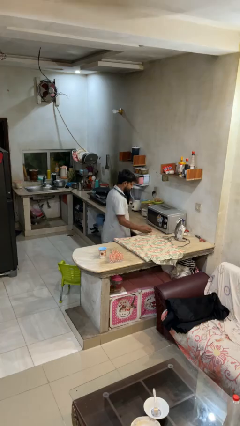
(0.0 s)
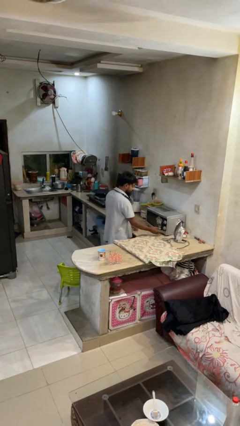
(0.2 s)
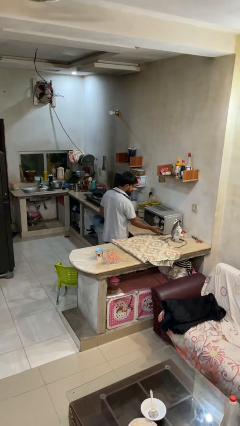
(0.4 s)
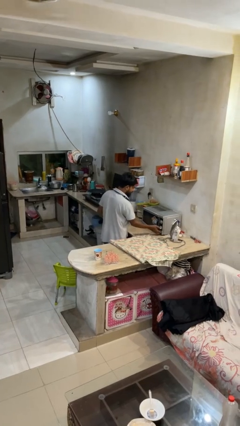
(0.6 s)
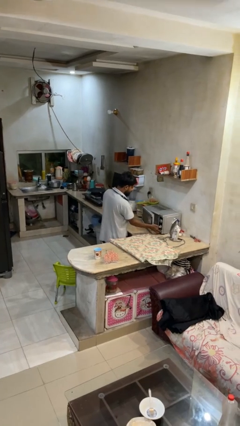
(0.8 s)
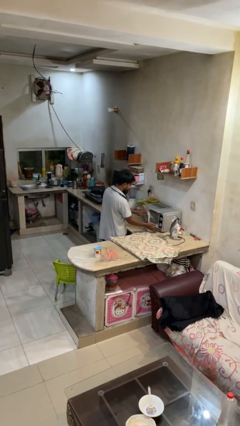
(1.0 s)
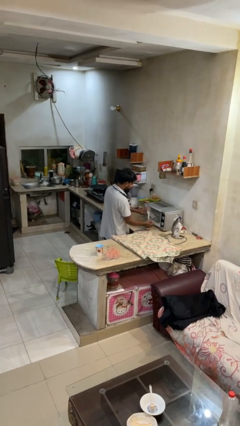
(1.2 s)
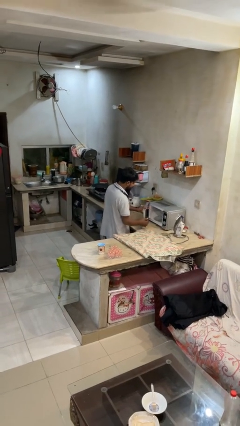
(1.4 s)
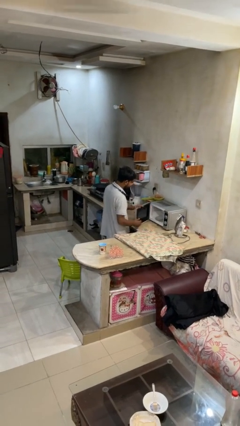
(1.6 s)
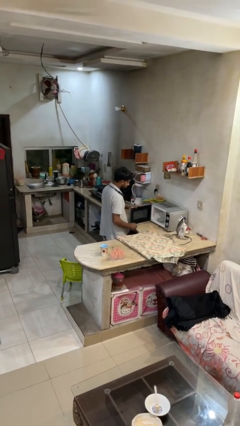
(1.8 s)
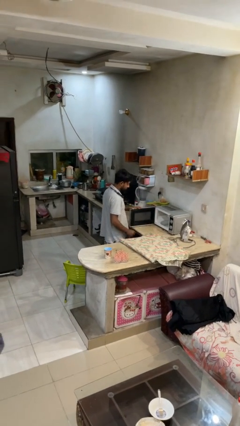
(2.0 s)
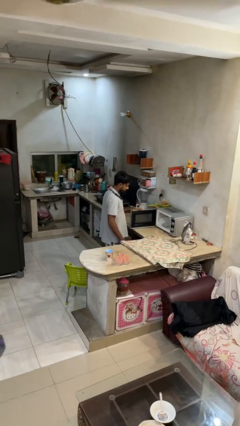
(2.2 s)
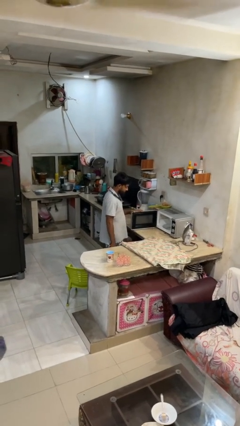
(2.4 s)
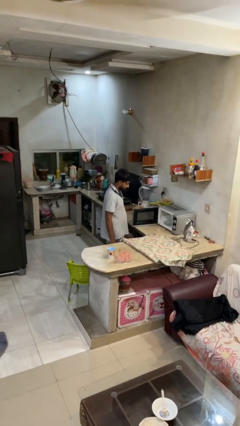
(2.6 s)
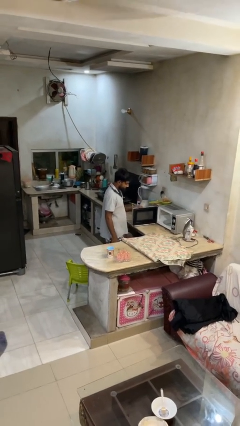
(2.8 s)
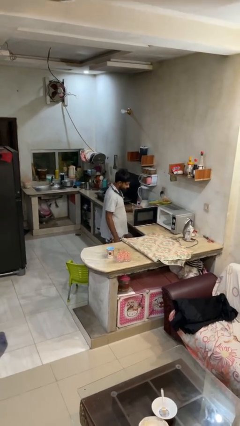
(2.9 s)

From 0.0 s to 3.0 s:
person opens microwave

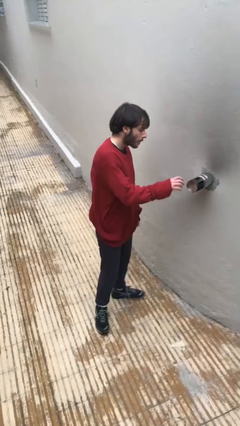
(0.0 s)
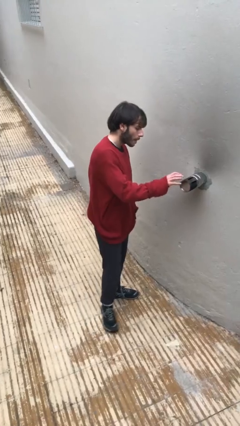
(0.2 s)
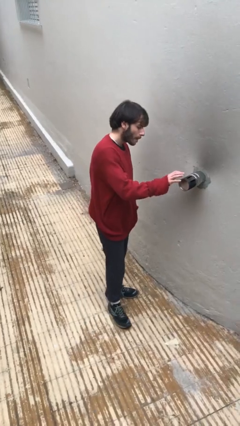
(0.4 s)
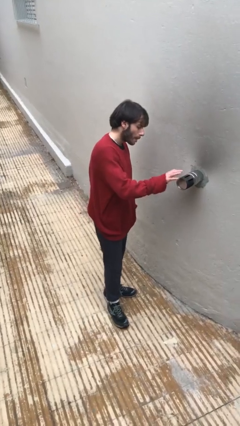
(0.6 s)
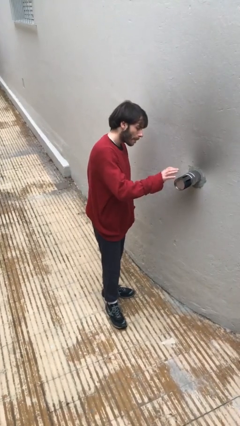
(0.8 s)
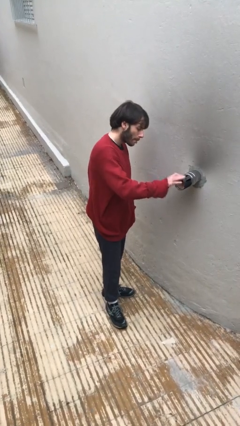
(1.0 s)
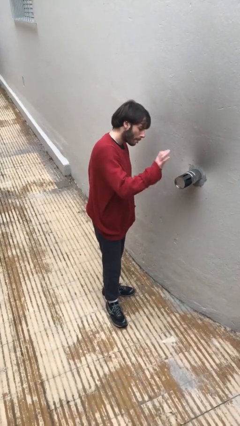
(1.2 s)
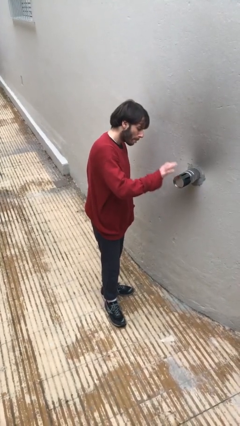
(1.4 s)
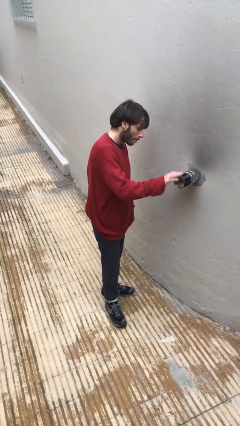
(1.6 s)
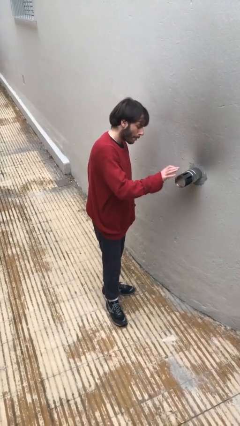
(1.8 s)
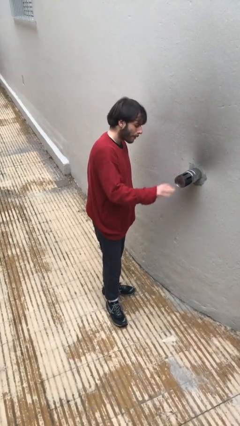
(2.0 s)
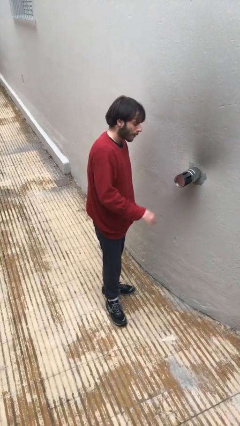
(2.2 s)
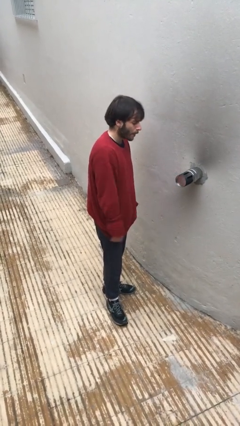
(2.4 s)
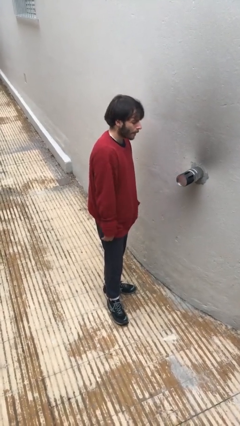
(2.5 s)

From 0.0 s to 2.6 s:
person taps object with finger

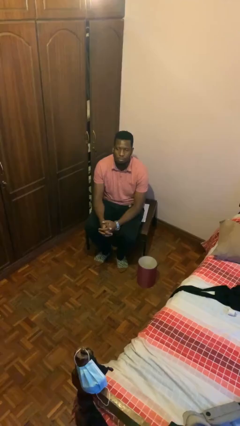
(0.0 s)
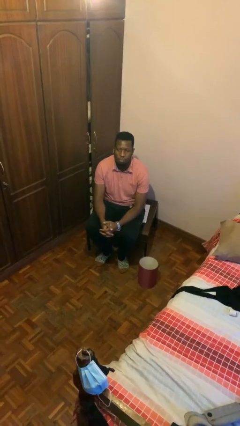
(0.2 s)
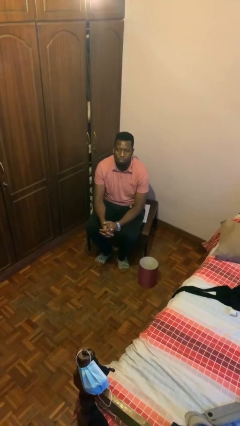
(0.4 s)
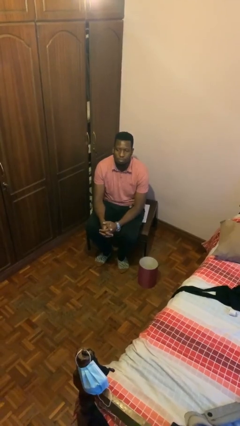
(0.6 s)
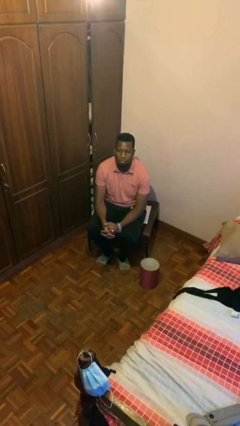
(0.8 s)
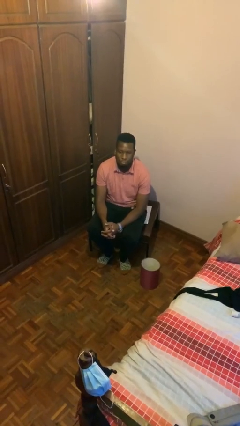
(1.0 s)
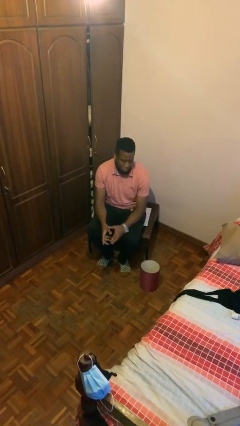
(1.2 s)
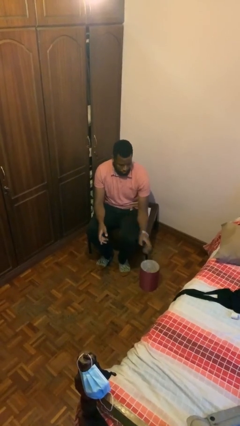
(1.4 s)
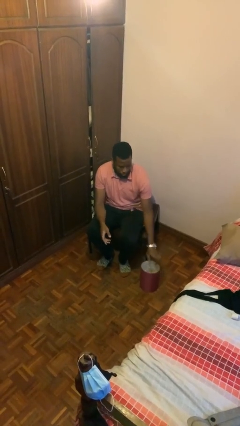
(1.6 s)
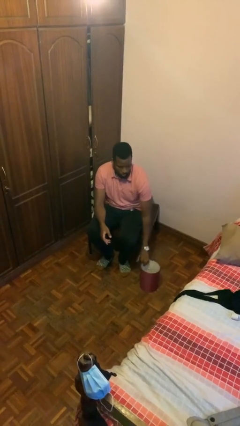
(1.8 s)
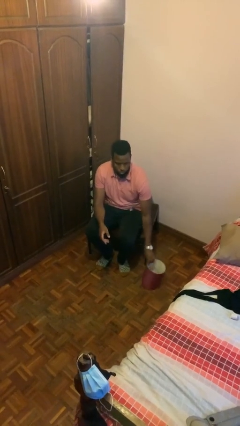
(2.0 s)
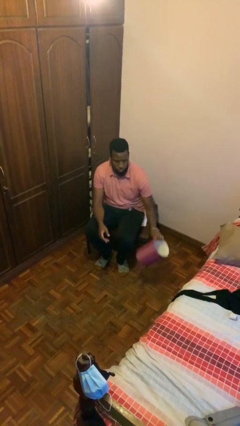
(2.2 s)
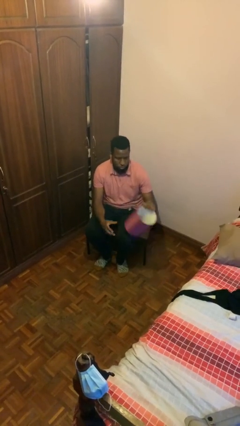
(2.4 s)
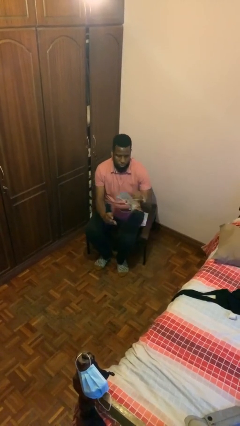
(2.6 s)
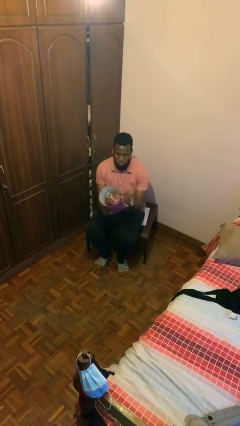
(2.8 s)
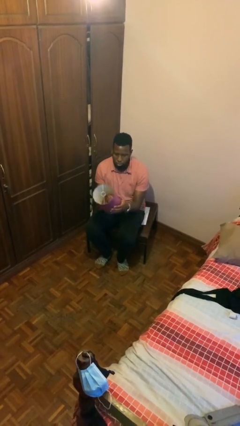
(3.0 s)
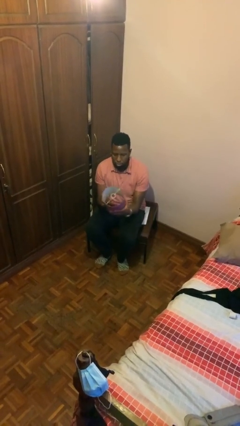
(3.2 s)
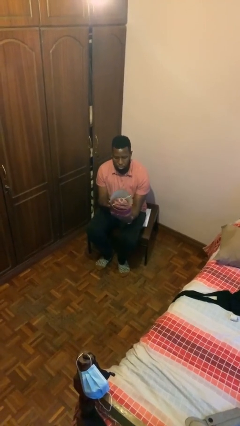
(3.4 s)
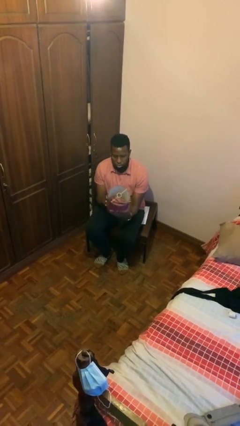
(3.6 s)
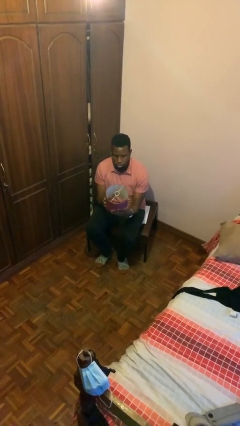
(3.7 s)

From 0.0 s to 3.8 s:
person picks up object from floor

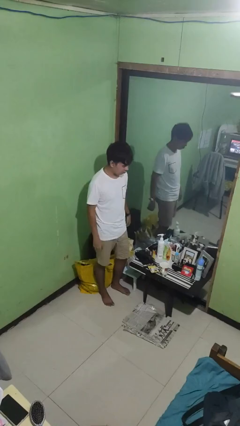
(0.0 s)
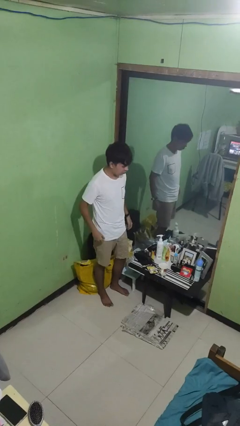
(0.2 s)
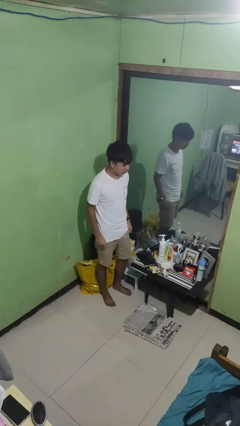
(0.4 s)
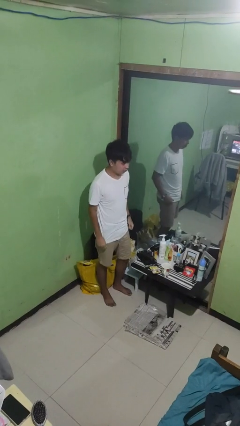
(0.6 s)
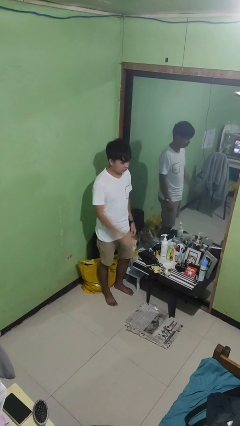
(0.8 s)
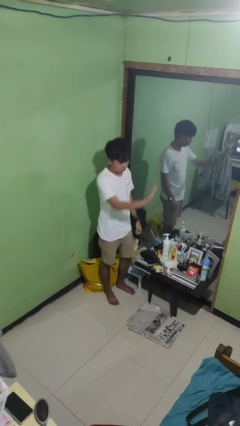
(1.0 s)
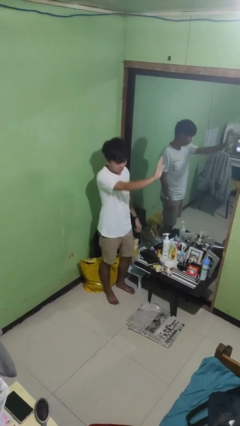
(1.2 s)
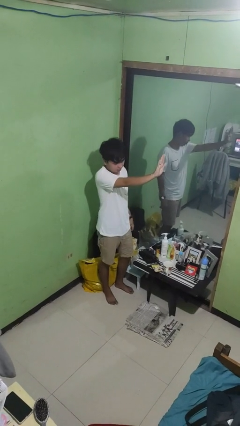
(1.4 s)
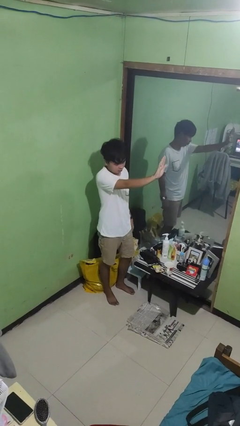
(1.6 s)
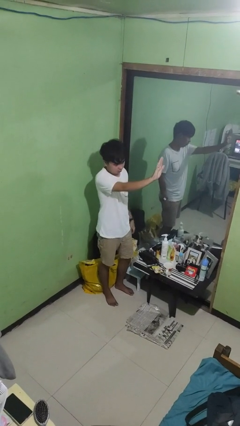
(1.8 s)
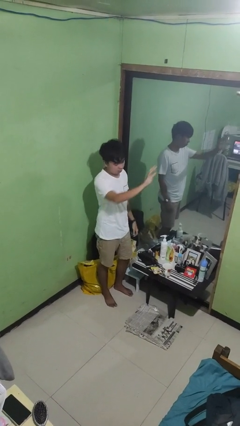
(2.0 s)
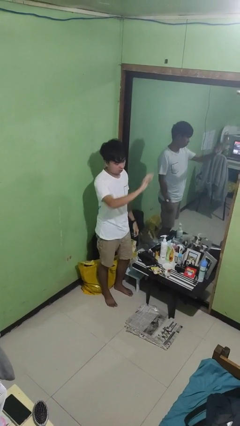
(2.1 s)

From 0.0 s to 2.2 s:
person gestures stop

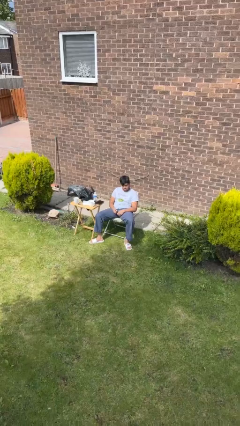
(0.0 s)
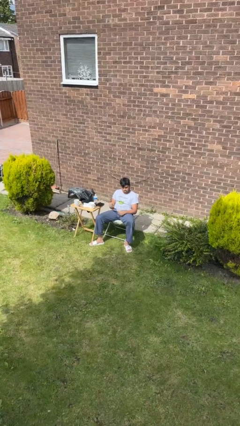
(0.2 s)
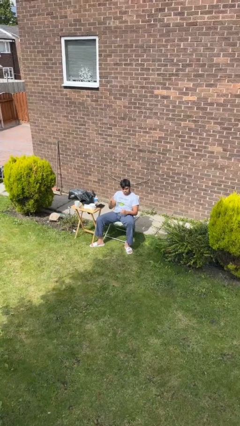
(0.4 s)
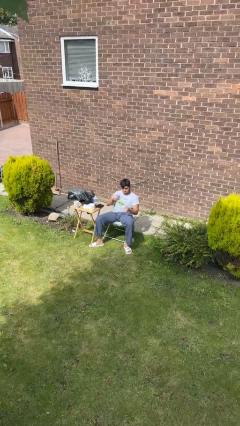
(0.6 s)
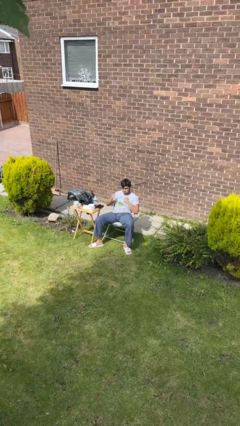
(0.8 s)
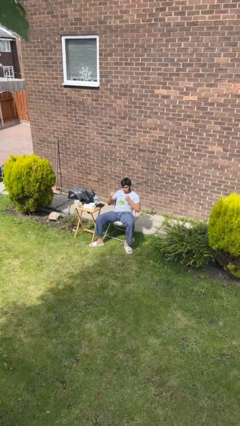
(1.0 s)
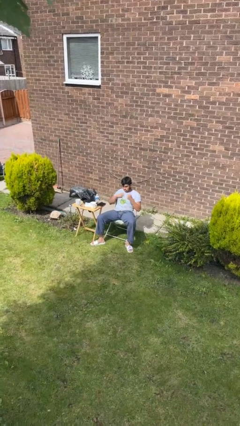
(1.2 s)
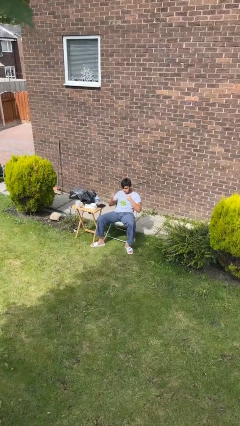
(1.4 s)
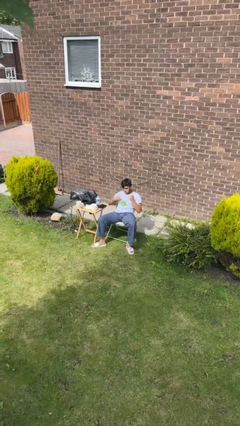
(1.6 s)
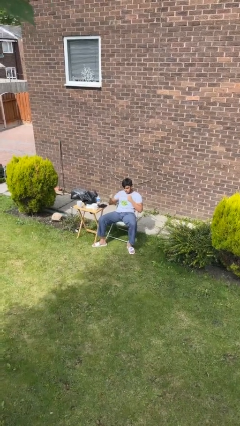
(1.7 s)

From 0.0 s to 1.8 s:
person drums on chest

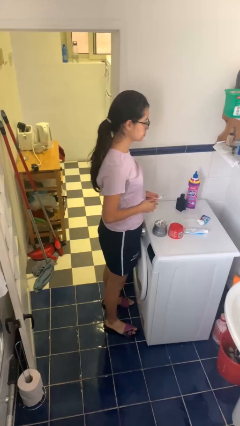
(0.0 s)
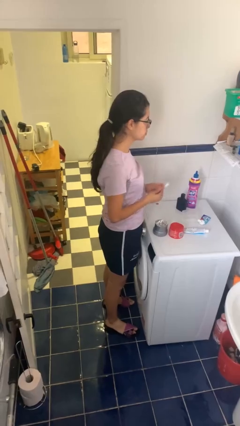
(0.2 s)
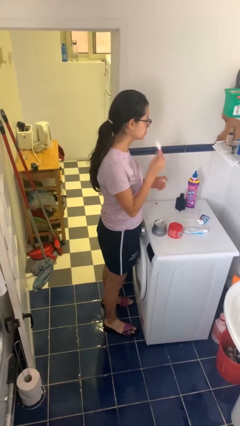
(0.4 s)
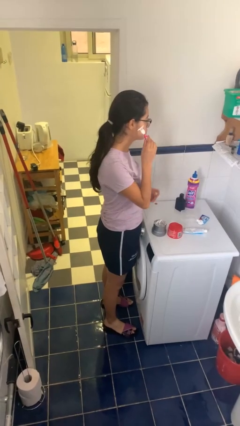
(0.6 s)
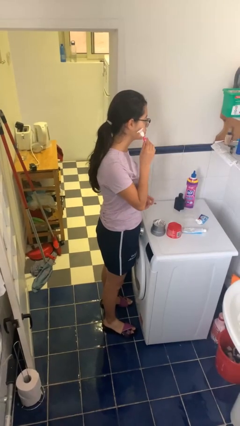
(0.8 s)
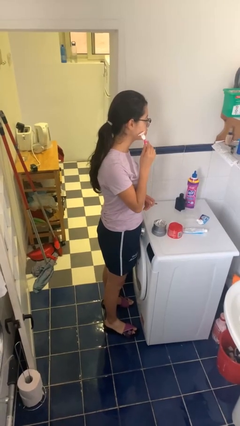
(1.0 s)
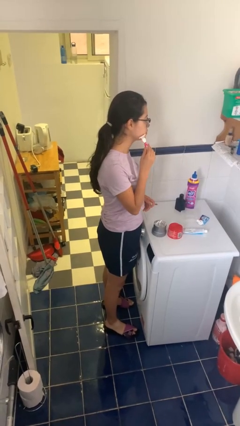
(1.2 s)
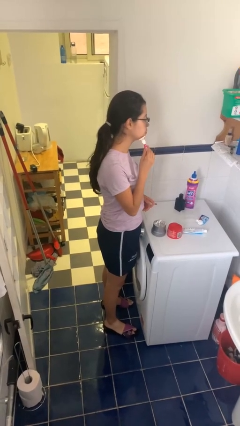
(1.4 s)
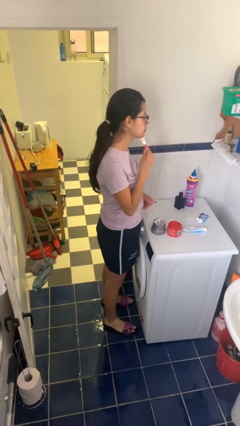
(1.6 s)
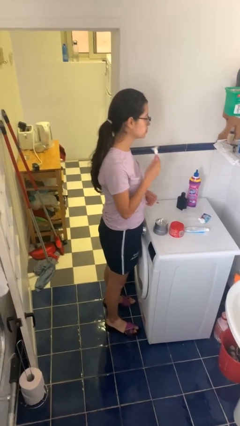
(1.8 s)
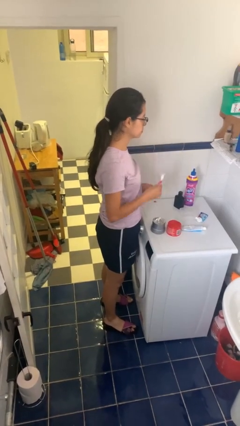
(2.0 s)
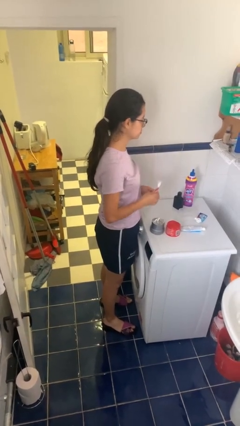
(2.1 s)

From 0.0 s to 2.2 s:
person shaves face

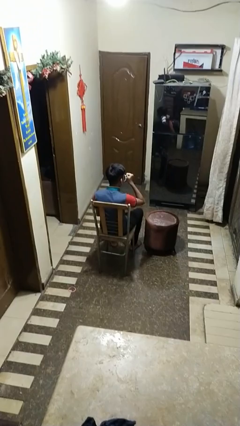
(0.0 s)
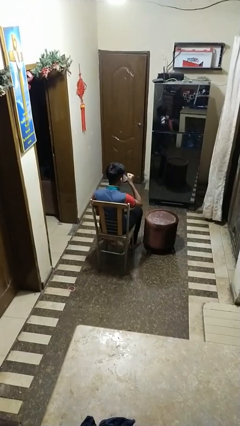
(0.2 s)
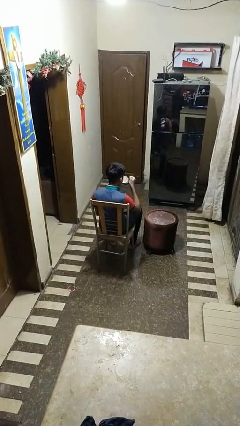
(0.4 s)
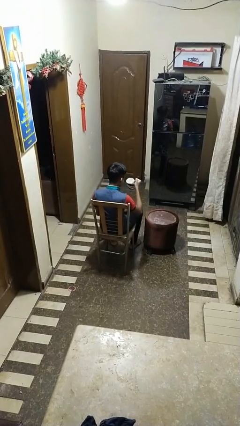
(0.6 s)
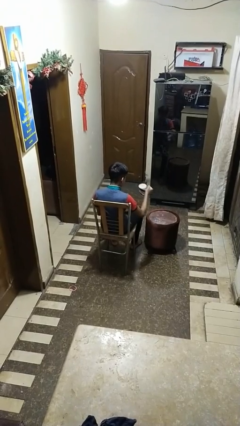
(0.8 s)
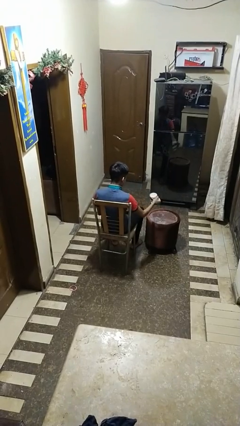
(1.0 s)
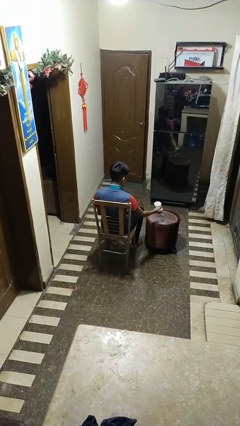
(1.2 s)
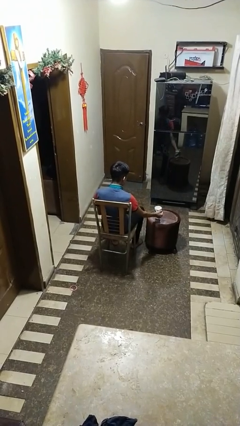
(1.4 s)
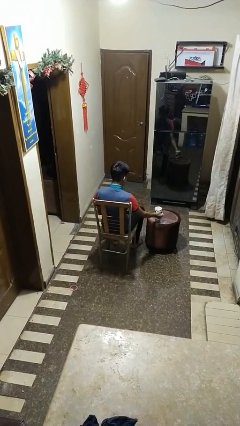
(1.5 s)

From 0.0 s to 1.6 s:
person puts down object on table

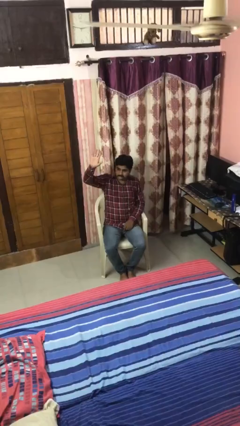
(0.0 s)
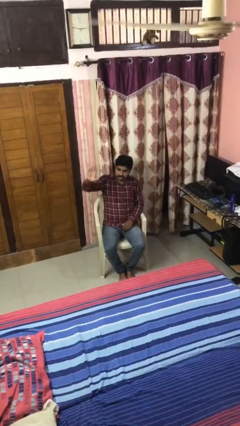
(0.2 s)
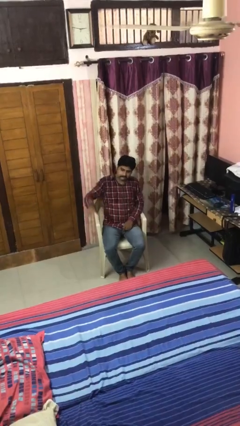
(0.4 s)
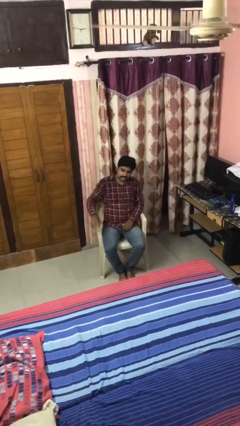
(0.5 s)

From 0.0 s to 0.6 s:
person gestures lower hand
